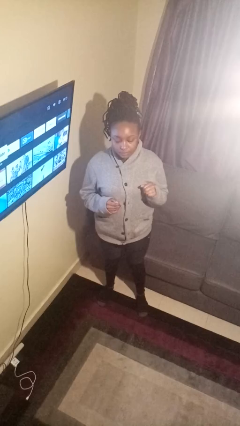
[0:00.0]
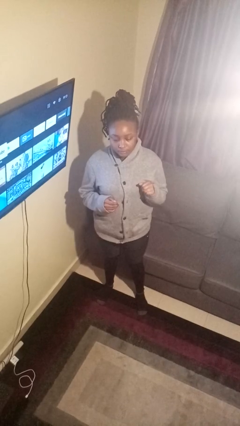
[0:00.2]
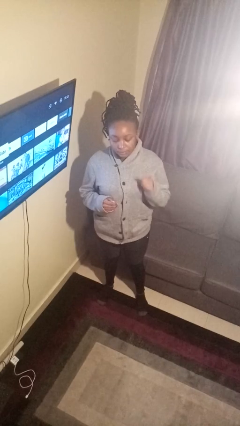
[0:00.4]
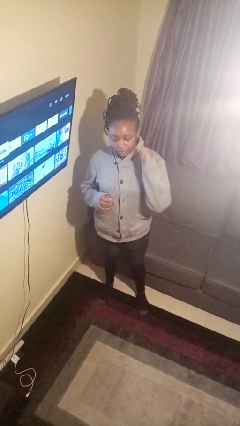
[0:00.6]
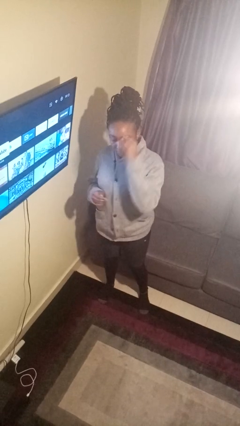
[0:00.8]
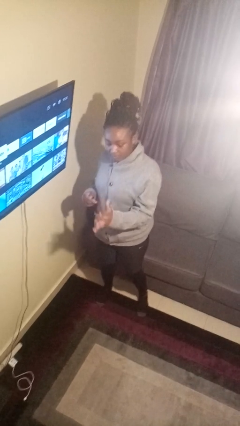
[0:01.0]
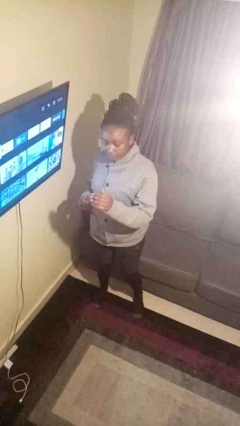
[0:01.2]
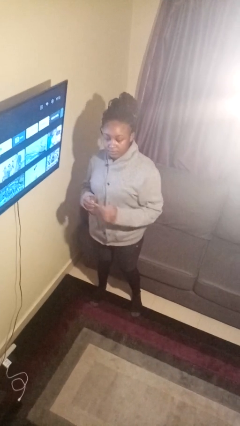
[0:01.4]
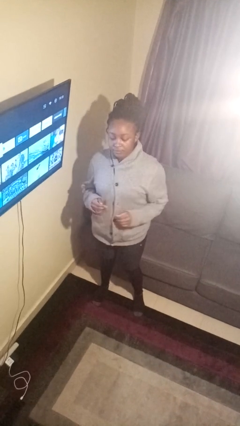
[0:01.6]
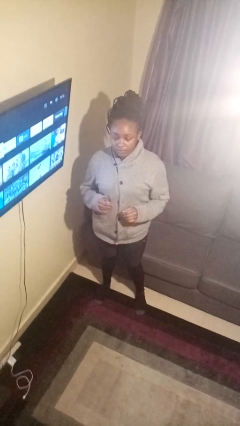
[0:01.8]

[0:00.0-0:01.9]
person karate chop

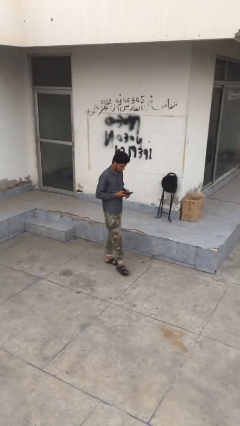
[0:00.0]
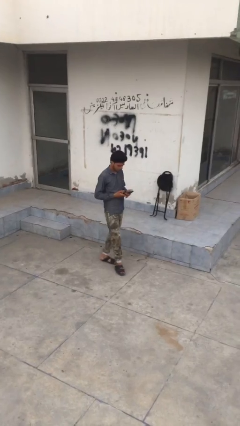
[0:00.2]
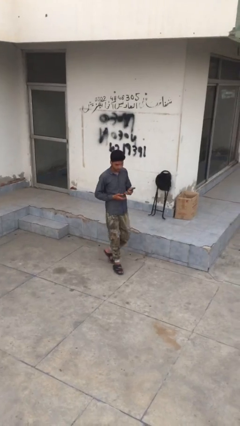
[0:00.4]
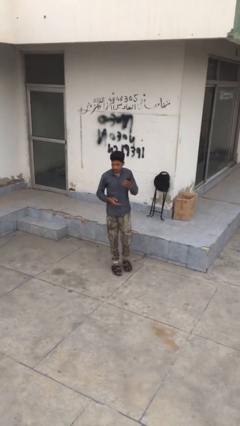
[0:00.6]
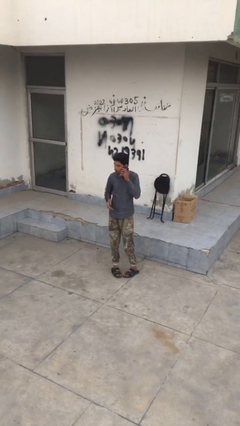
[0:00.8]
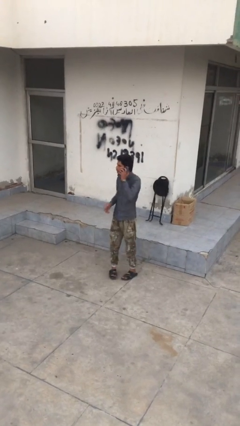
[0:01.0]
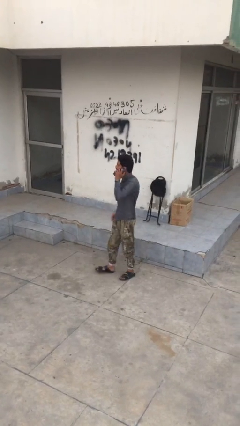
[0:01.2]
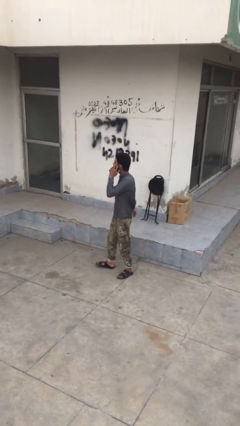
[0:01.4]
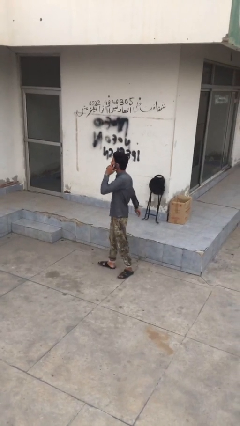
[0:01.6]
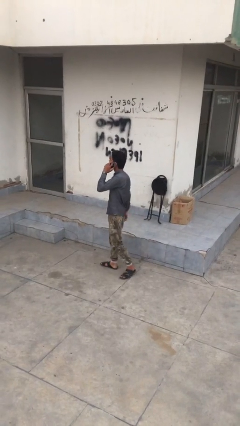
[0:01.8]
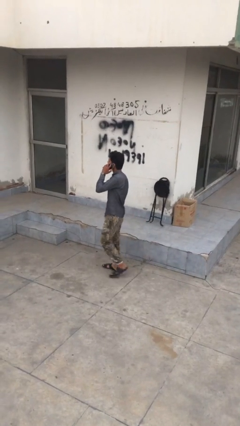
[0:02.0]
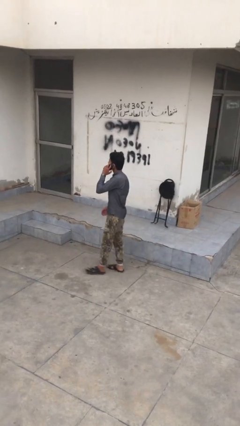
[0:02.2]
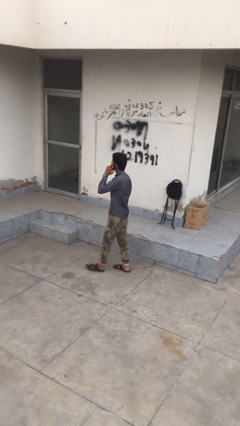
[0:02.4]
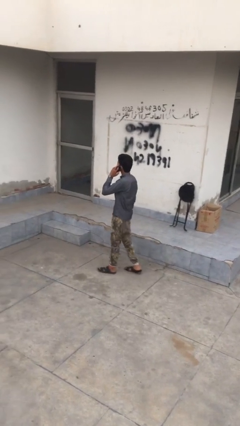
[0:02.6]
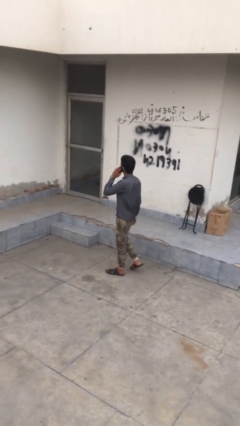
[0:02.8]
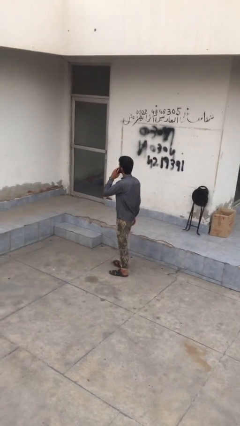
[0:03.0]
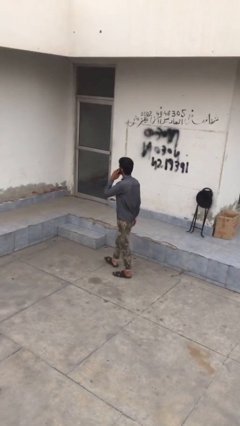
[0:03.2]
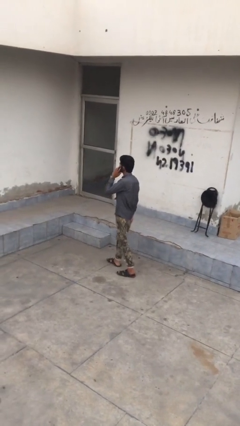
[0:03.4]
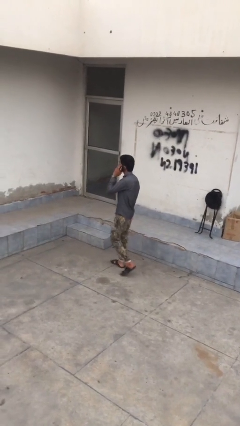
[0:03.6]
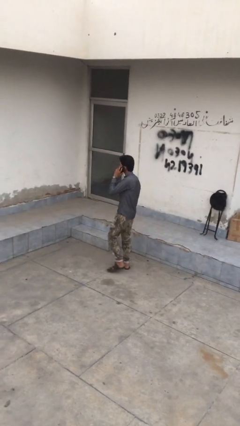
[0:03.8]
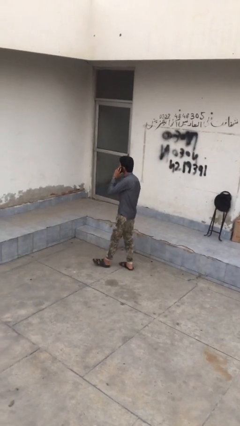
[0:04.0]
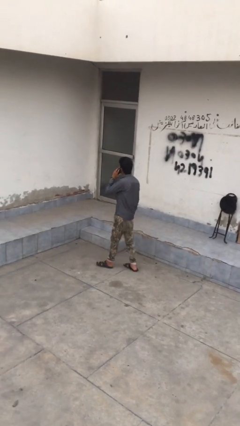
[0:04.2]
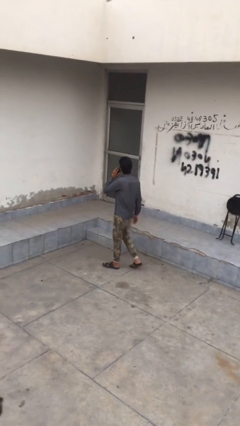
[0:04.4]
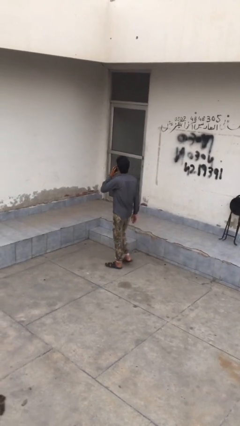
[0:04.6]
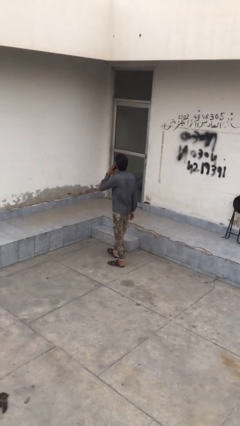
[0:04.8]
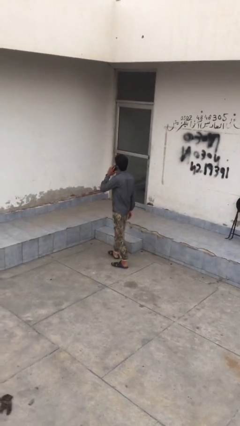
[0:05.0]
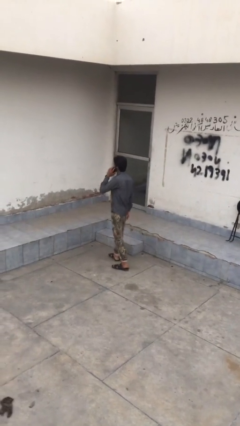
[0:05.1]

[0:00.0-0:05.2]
person talks on phone

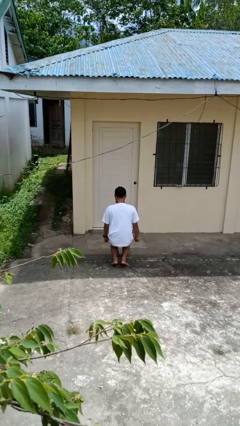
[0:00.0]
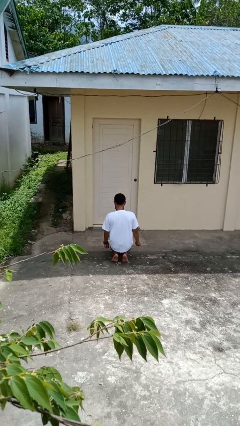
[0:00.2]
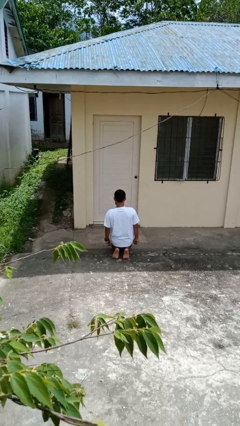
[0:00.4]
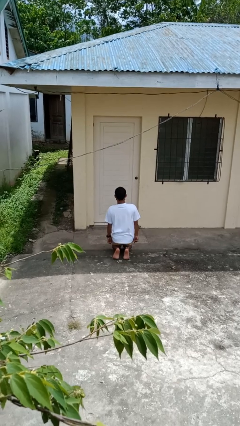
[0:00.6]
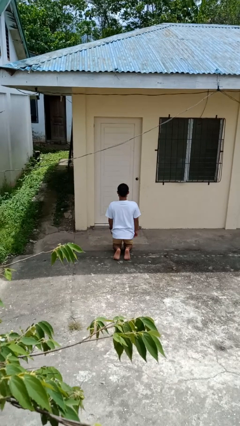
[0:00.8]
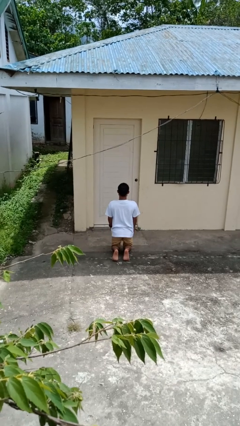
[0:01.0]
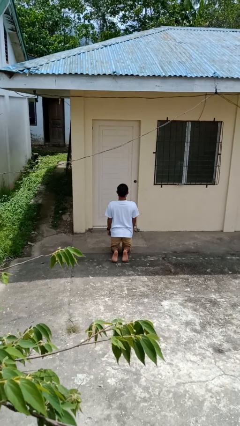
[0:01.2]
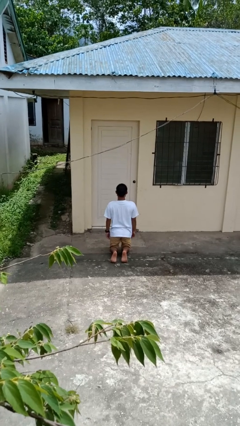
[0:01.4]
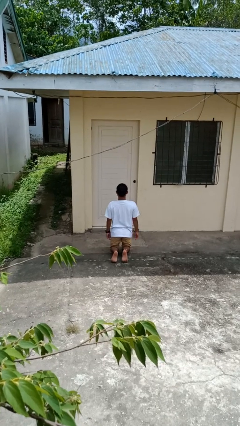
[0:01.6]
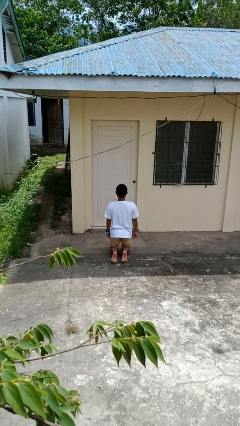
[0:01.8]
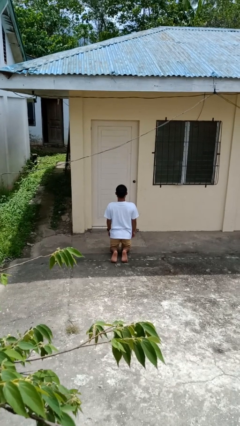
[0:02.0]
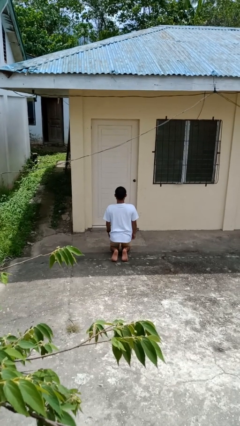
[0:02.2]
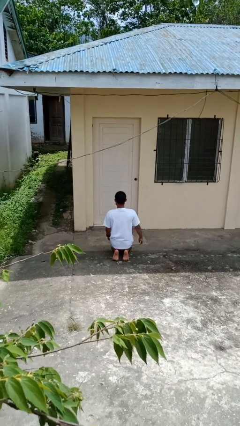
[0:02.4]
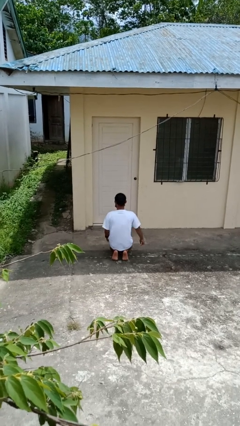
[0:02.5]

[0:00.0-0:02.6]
person kneels

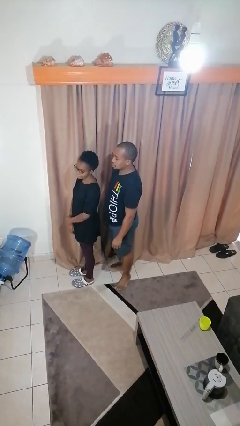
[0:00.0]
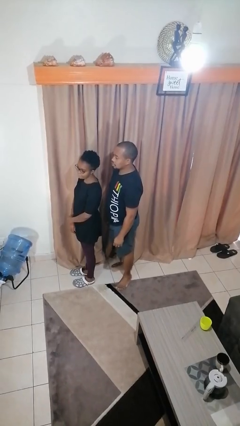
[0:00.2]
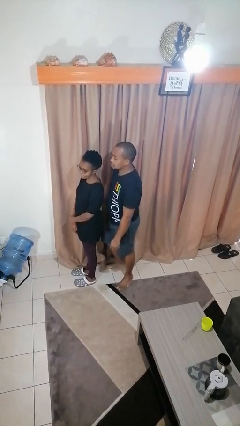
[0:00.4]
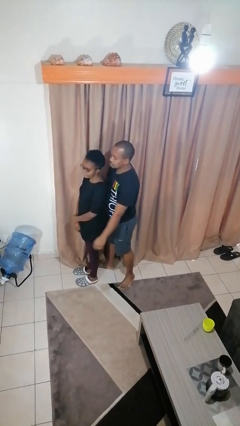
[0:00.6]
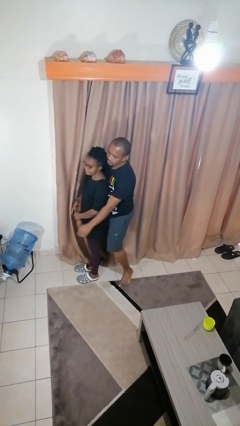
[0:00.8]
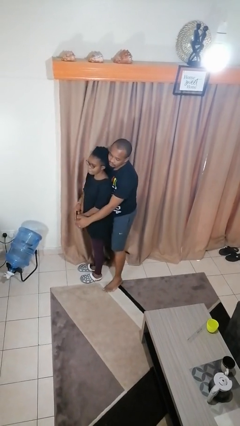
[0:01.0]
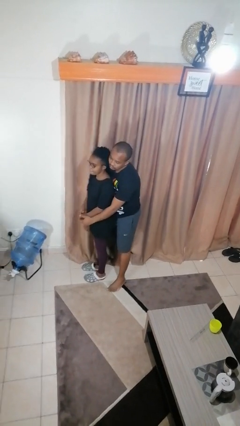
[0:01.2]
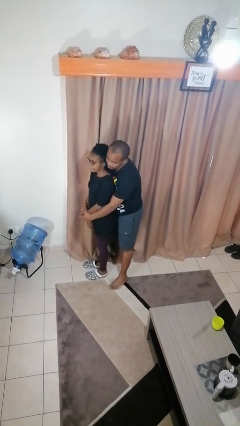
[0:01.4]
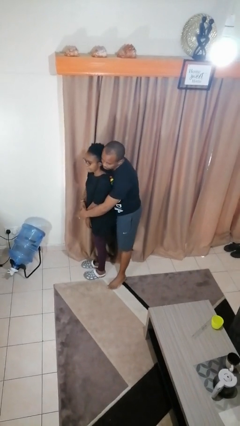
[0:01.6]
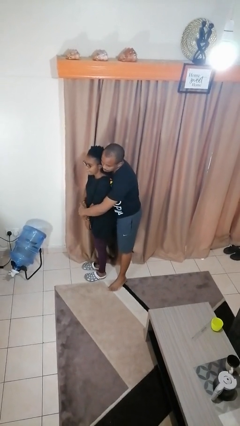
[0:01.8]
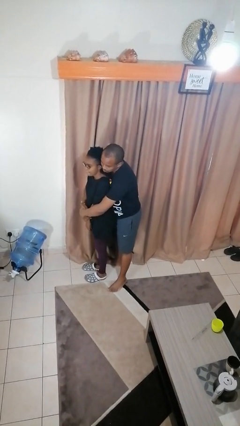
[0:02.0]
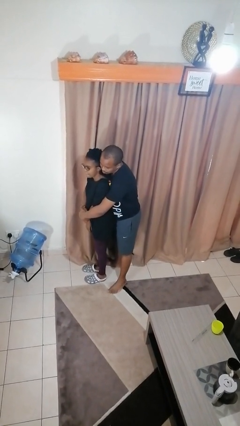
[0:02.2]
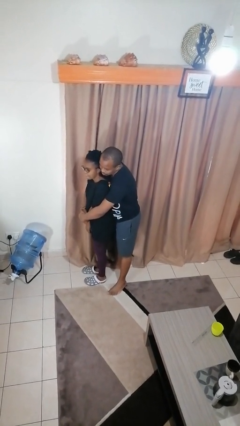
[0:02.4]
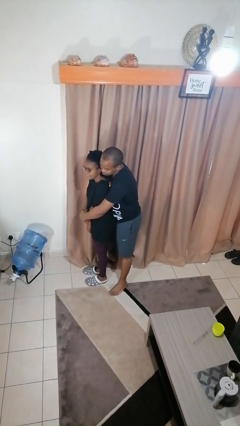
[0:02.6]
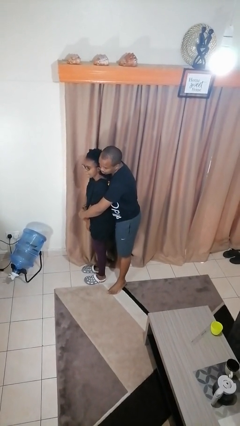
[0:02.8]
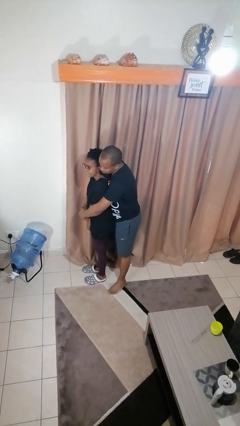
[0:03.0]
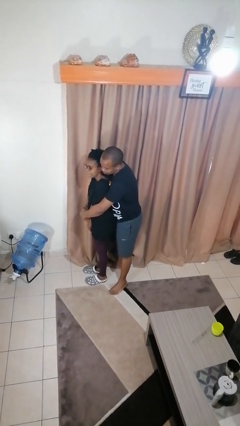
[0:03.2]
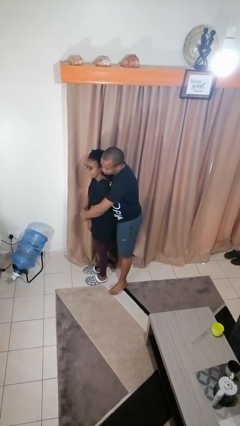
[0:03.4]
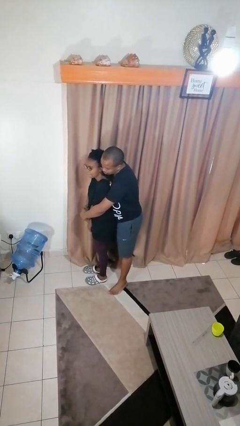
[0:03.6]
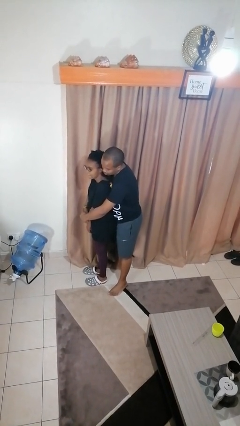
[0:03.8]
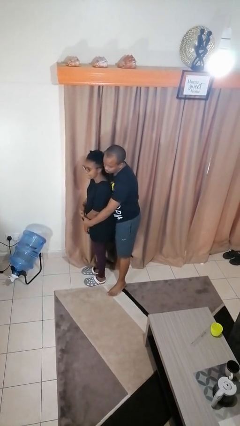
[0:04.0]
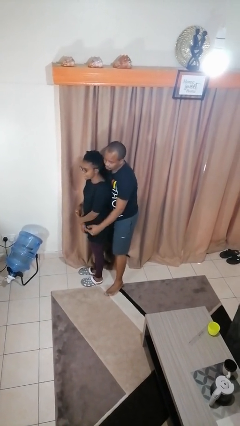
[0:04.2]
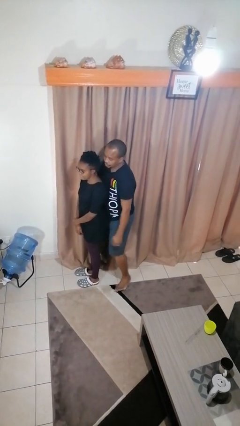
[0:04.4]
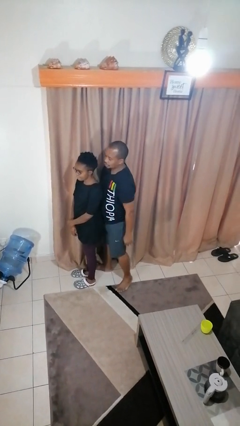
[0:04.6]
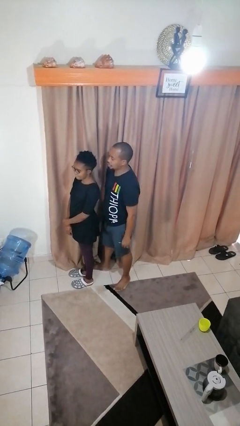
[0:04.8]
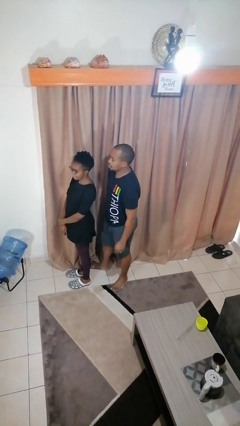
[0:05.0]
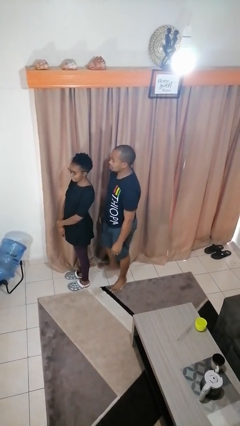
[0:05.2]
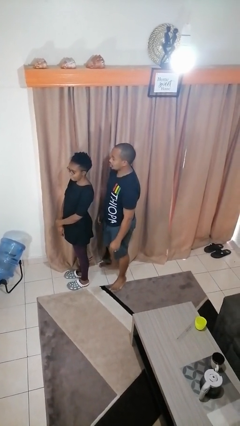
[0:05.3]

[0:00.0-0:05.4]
person hugs person from behind

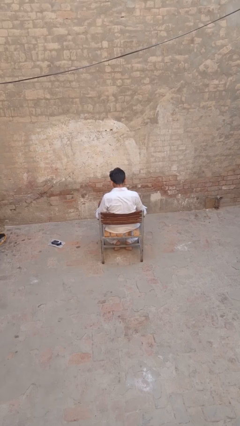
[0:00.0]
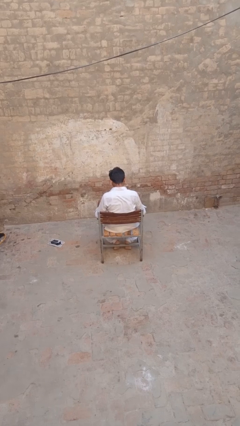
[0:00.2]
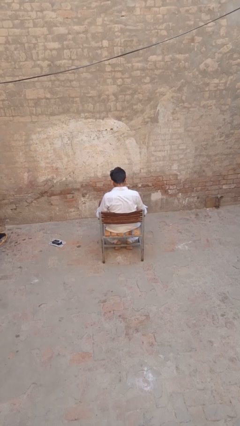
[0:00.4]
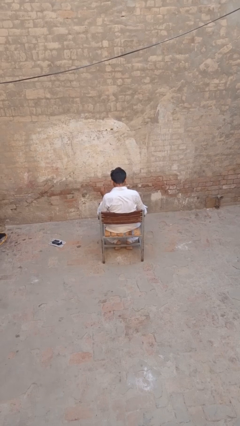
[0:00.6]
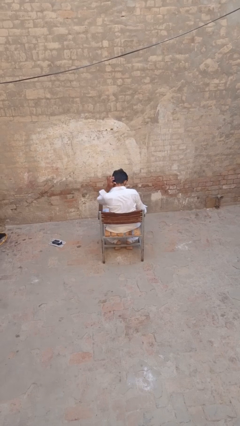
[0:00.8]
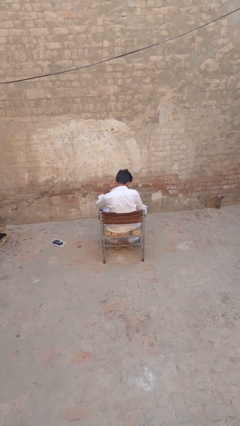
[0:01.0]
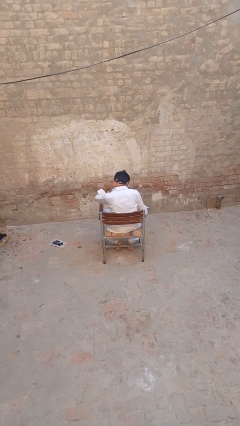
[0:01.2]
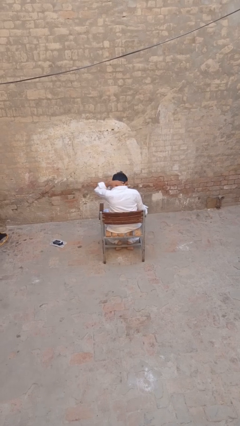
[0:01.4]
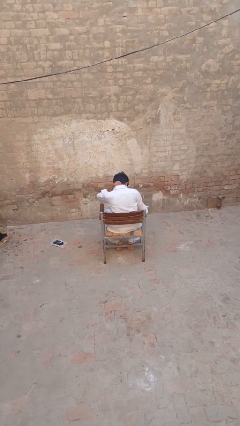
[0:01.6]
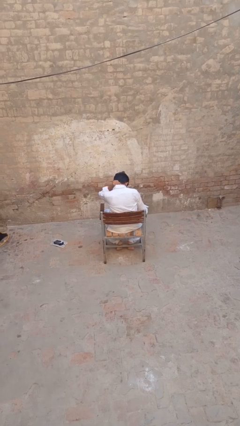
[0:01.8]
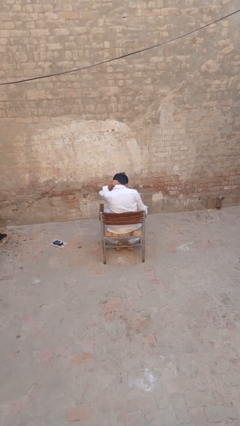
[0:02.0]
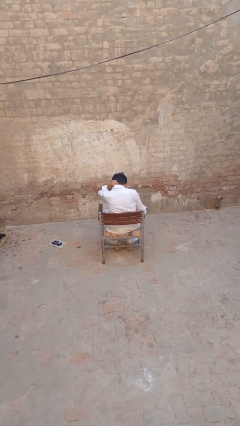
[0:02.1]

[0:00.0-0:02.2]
person rubs neck

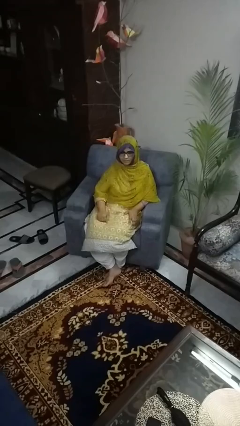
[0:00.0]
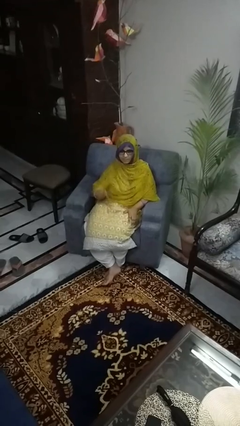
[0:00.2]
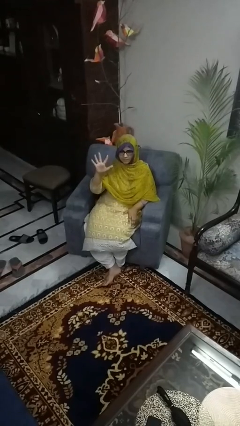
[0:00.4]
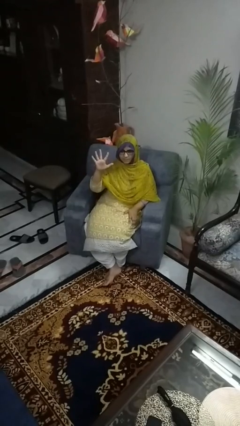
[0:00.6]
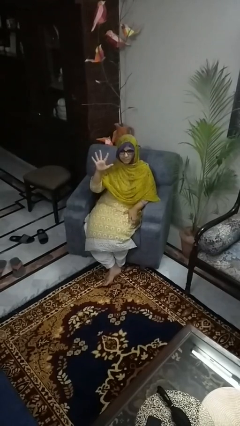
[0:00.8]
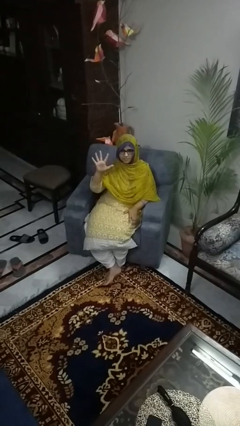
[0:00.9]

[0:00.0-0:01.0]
person gestures number five
